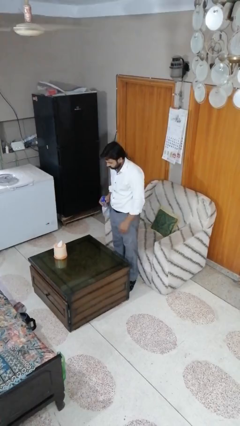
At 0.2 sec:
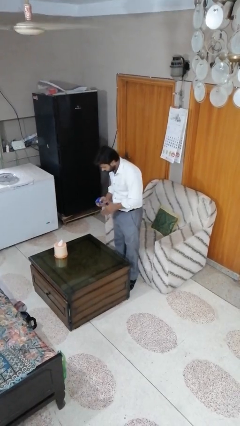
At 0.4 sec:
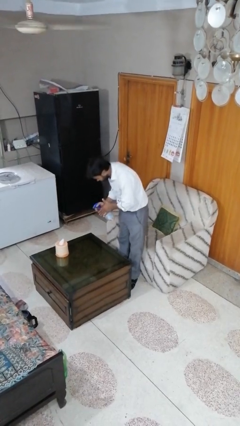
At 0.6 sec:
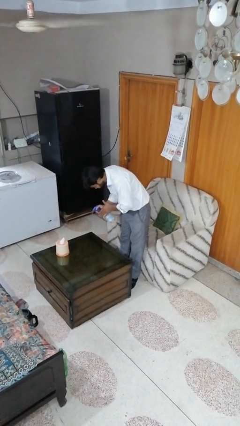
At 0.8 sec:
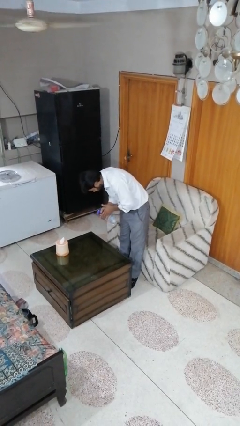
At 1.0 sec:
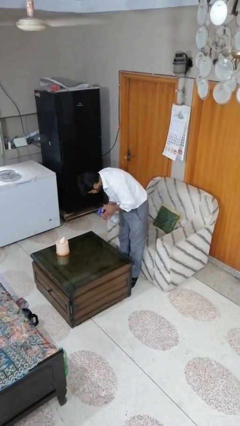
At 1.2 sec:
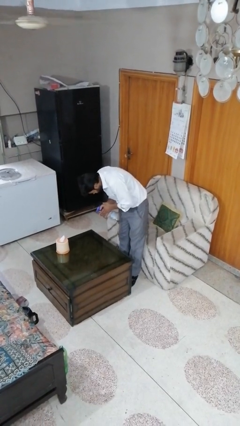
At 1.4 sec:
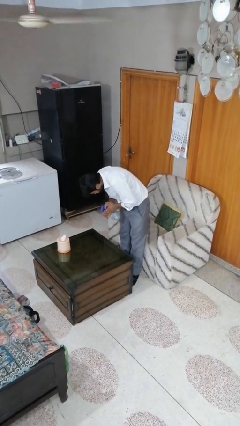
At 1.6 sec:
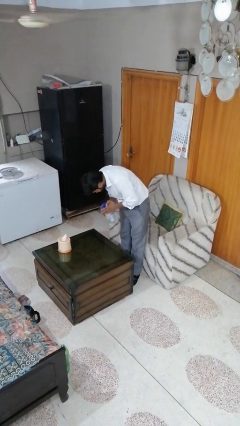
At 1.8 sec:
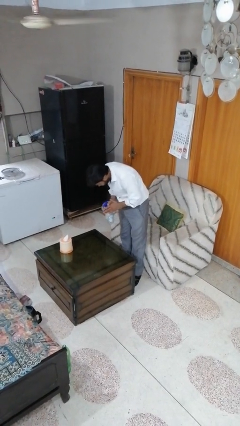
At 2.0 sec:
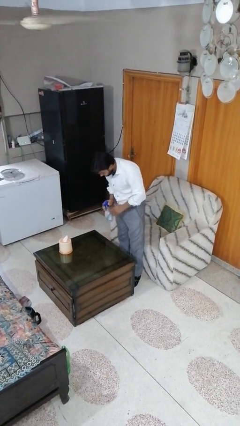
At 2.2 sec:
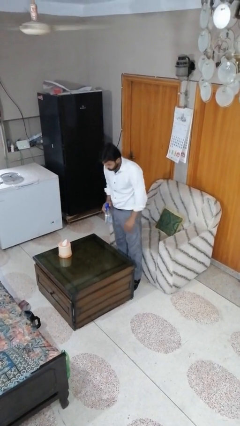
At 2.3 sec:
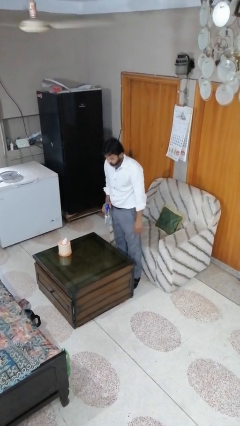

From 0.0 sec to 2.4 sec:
person sprays from bottle

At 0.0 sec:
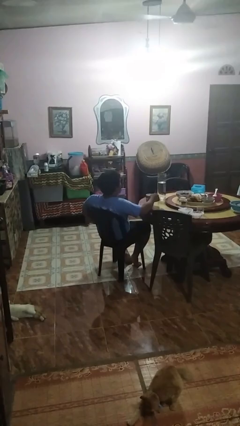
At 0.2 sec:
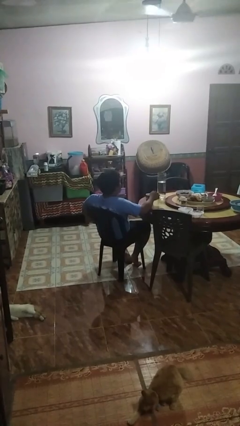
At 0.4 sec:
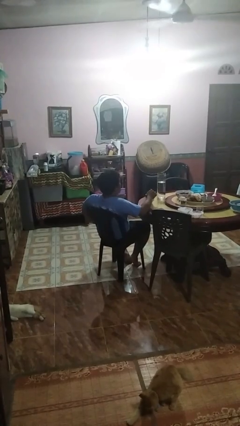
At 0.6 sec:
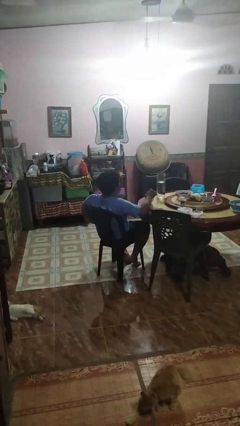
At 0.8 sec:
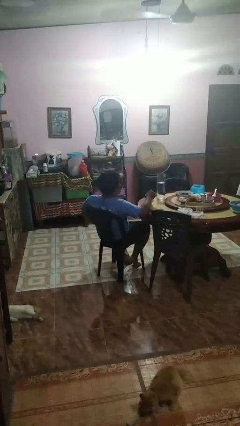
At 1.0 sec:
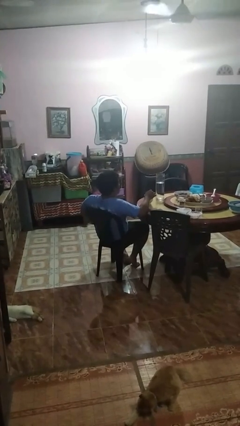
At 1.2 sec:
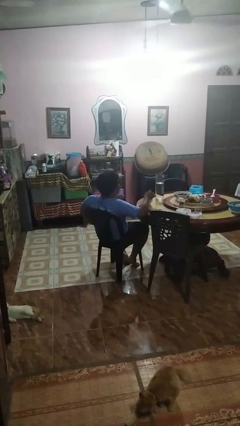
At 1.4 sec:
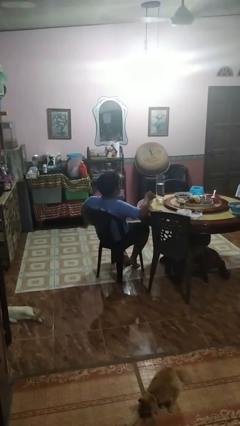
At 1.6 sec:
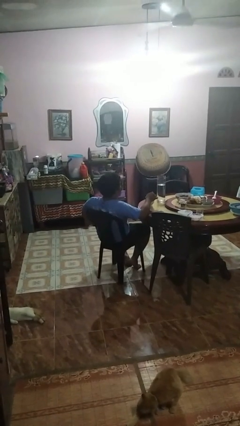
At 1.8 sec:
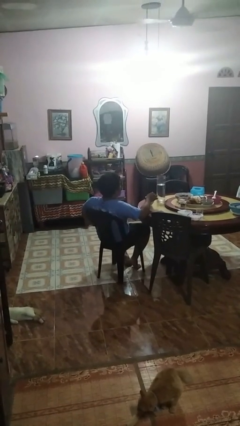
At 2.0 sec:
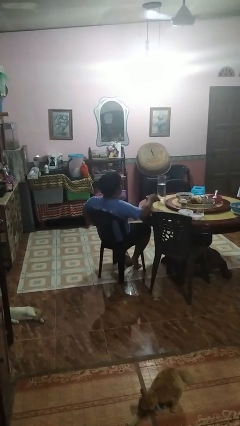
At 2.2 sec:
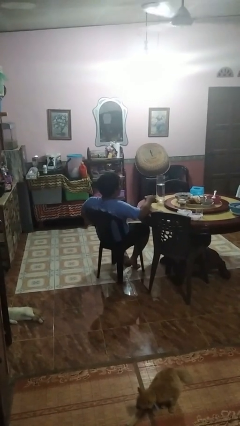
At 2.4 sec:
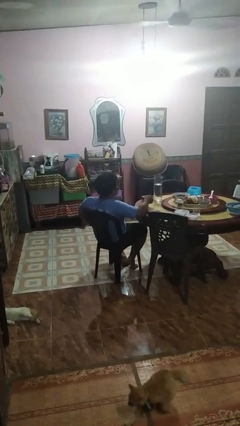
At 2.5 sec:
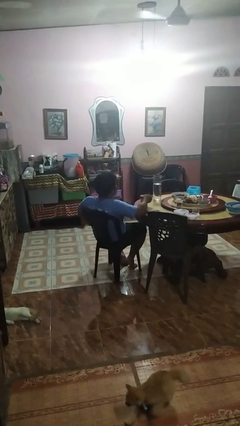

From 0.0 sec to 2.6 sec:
person stirs mug

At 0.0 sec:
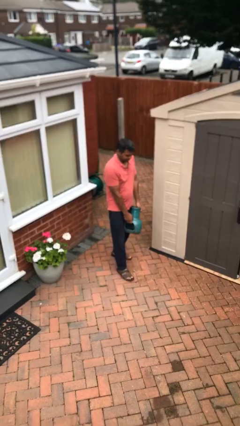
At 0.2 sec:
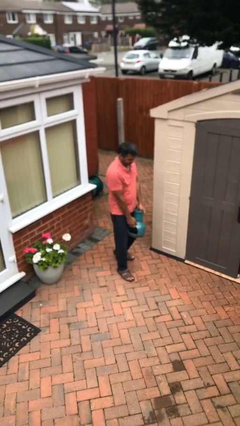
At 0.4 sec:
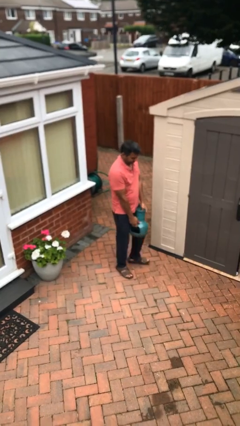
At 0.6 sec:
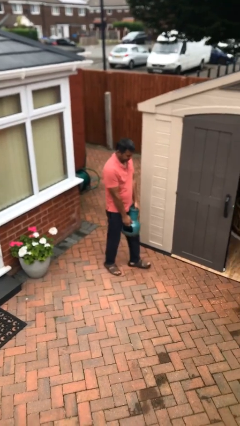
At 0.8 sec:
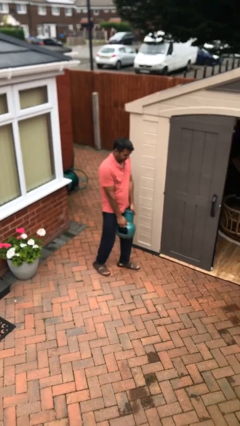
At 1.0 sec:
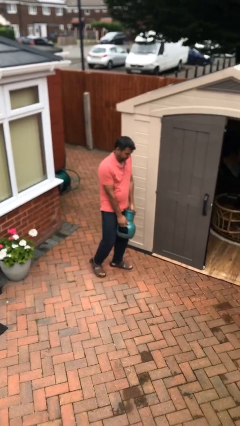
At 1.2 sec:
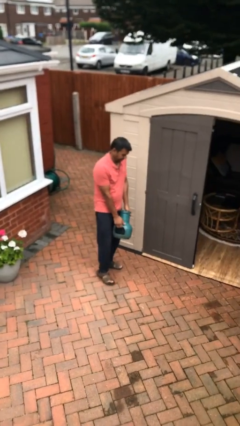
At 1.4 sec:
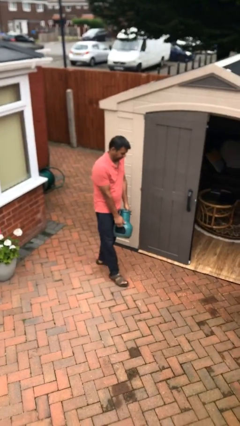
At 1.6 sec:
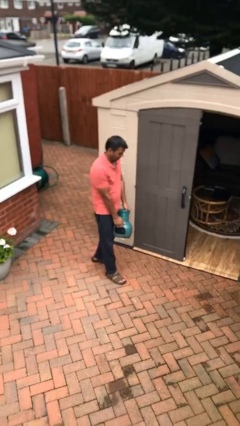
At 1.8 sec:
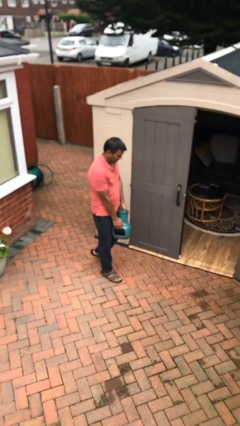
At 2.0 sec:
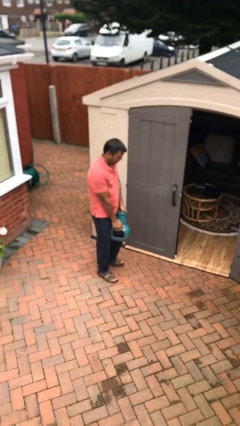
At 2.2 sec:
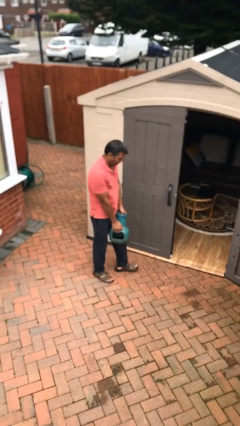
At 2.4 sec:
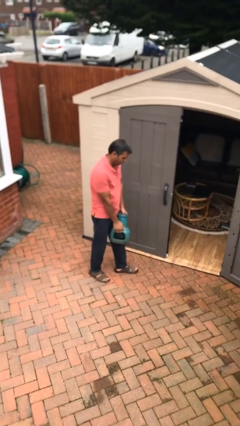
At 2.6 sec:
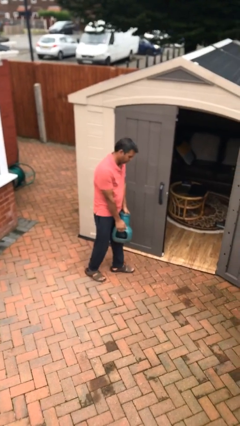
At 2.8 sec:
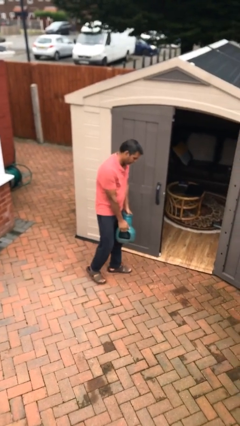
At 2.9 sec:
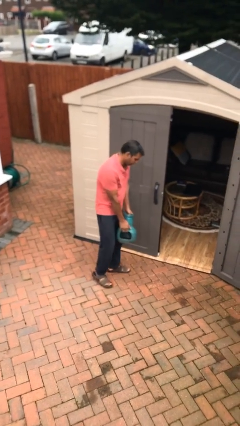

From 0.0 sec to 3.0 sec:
person carries heavy object

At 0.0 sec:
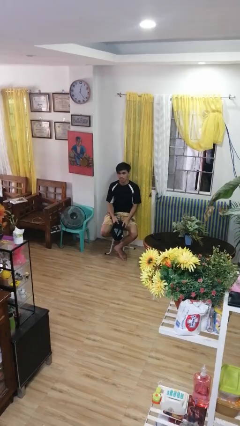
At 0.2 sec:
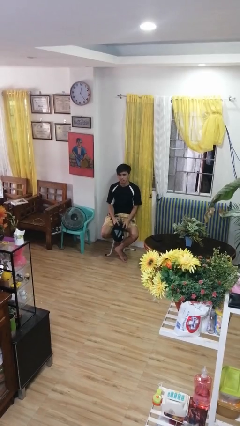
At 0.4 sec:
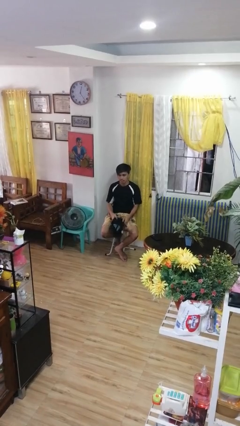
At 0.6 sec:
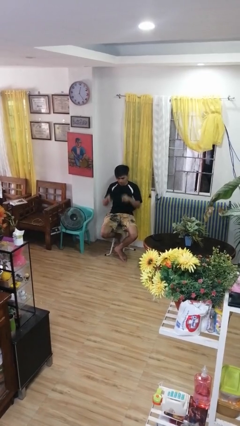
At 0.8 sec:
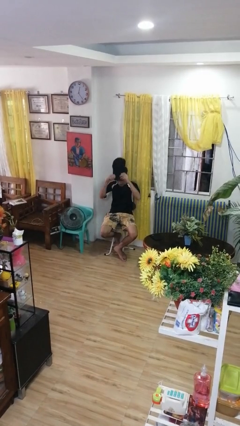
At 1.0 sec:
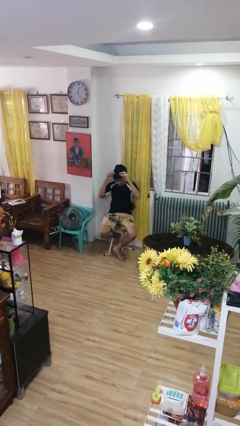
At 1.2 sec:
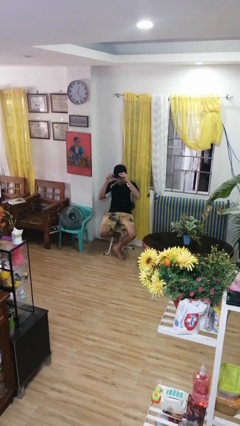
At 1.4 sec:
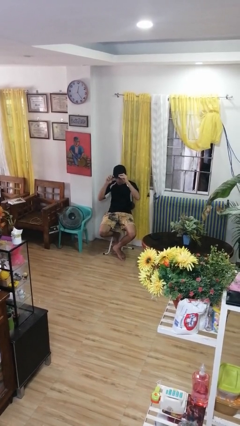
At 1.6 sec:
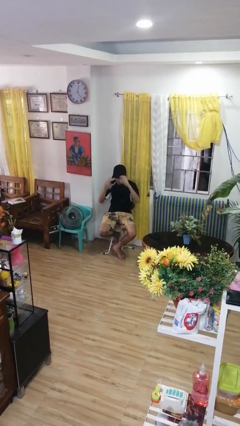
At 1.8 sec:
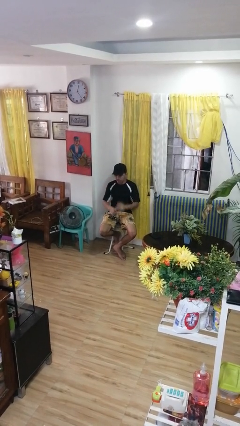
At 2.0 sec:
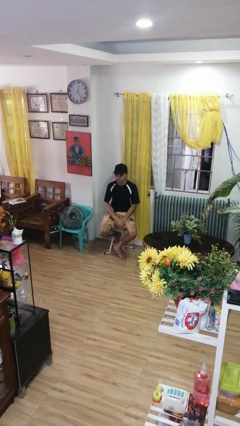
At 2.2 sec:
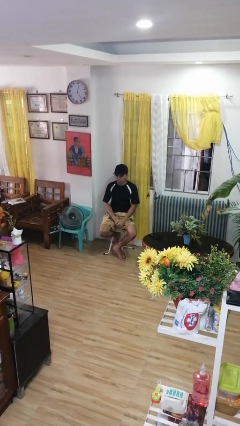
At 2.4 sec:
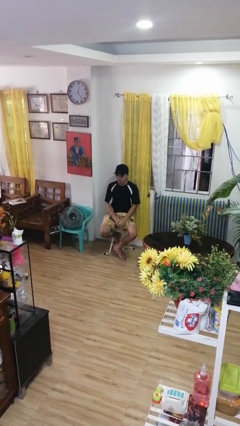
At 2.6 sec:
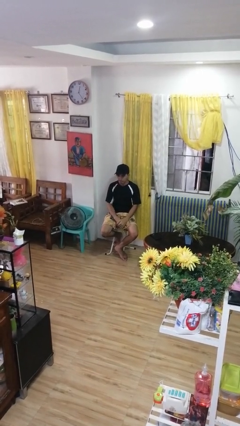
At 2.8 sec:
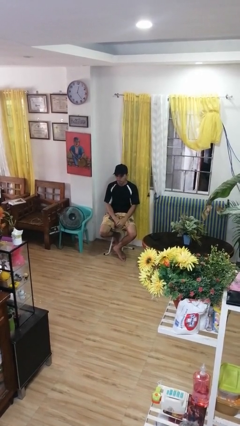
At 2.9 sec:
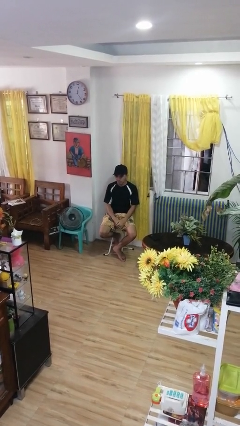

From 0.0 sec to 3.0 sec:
person puts on hat

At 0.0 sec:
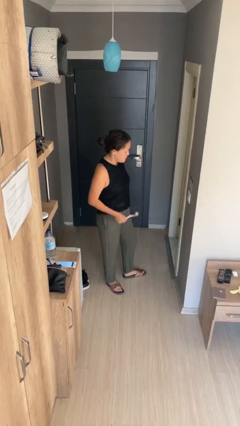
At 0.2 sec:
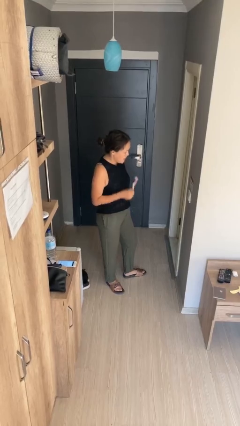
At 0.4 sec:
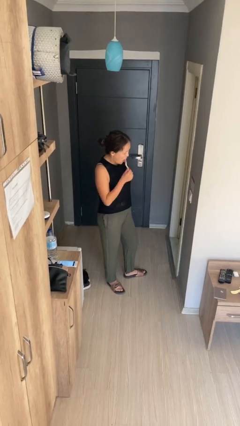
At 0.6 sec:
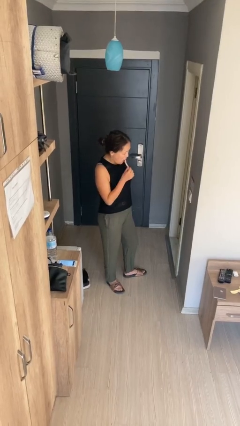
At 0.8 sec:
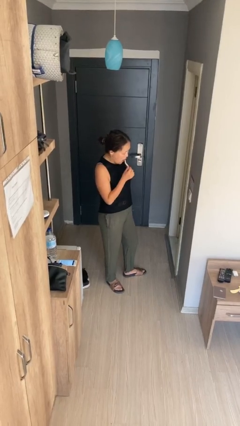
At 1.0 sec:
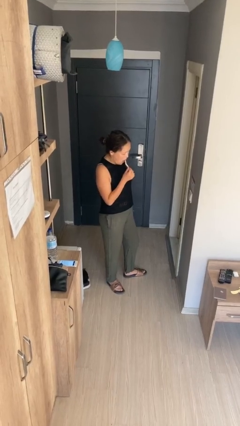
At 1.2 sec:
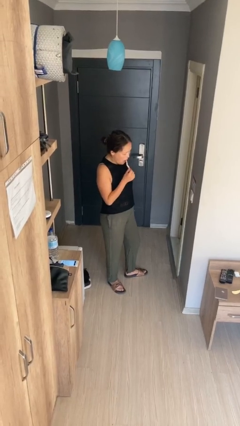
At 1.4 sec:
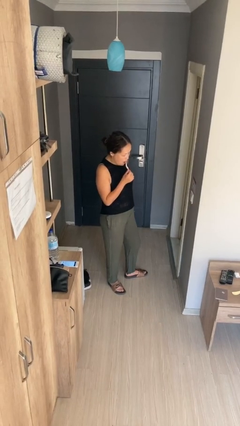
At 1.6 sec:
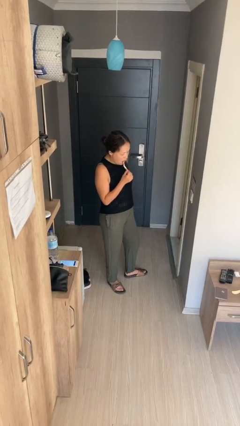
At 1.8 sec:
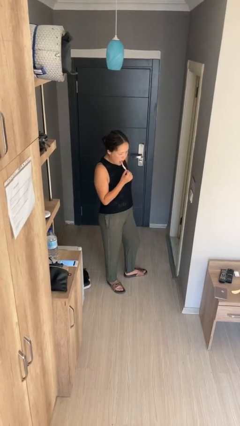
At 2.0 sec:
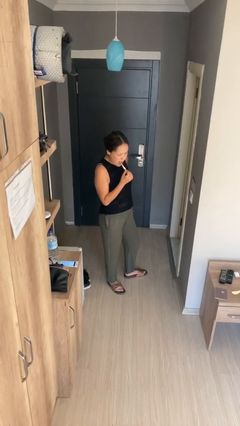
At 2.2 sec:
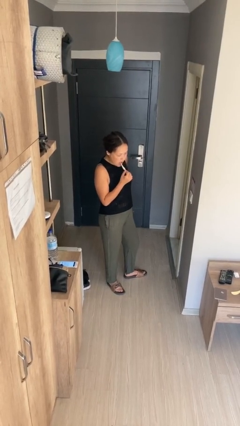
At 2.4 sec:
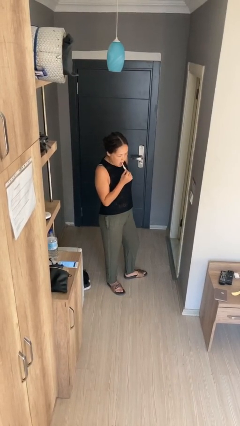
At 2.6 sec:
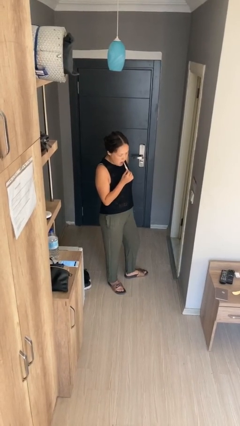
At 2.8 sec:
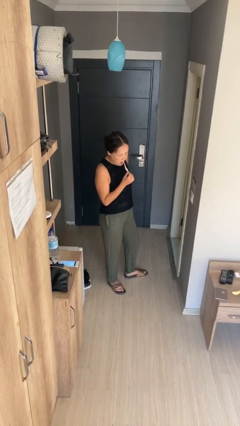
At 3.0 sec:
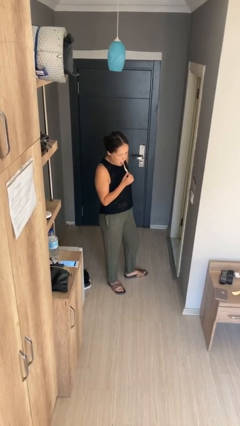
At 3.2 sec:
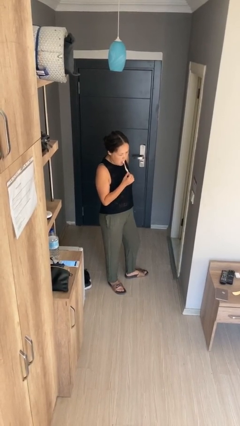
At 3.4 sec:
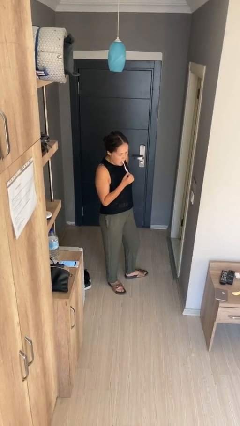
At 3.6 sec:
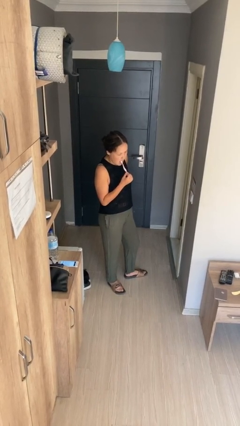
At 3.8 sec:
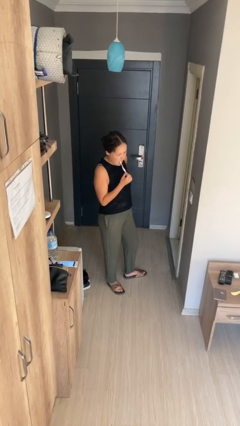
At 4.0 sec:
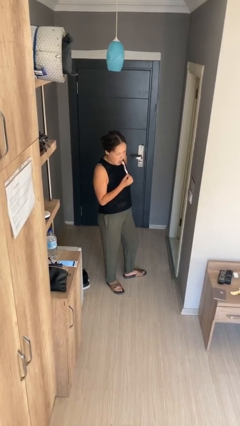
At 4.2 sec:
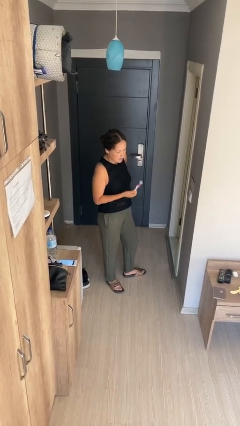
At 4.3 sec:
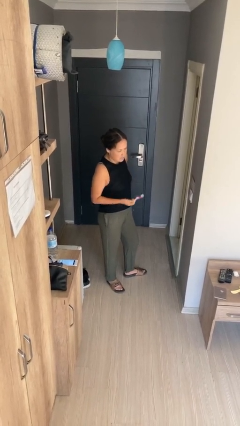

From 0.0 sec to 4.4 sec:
person brushes teeth

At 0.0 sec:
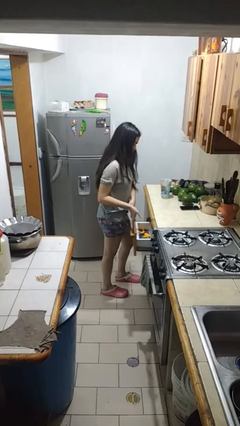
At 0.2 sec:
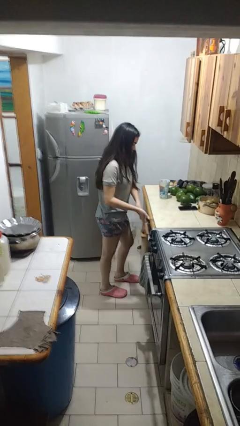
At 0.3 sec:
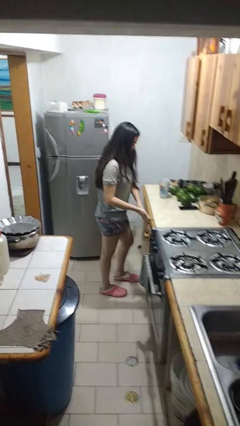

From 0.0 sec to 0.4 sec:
person closes kitchen drawer

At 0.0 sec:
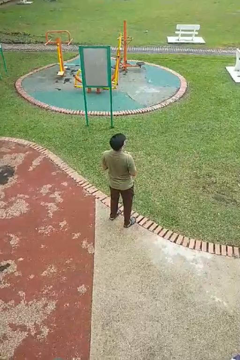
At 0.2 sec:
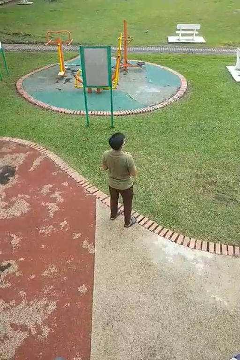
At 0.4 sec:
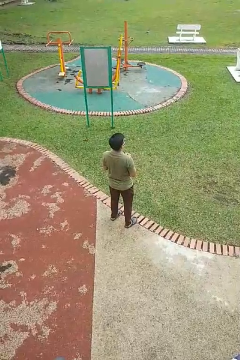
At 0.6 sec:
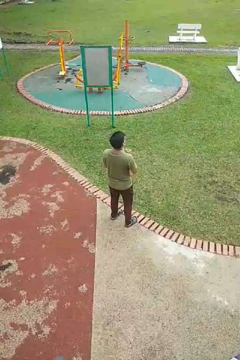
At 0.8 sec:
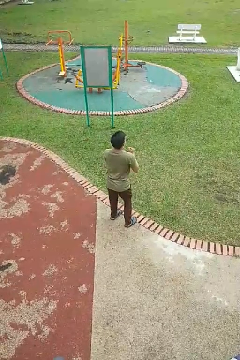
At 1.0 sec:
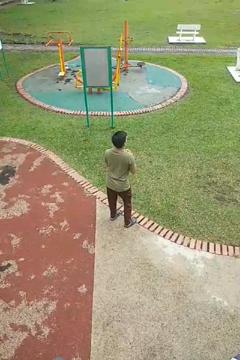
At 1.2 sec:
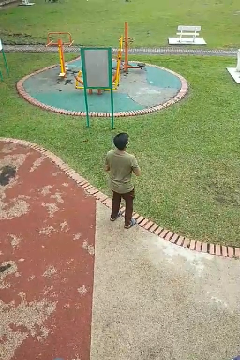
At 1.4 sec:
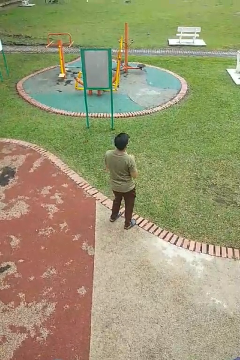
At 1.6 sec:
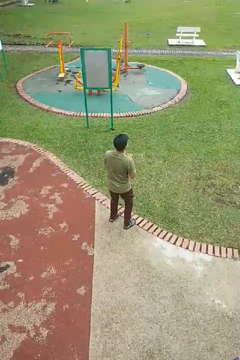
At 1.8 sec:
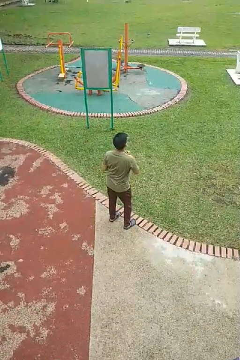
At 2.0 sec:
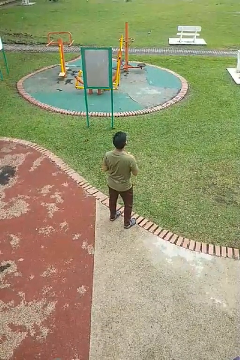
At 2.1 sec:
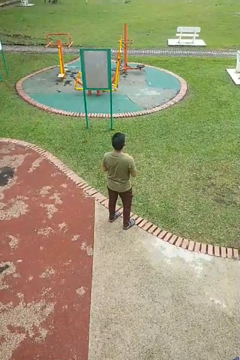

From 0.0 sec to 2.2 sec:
person wiggles hips
